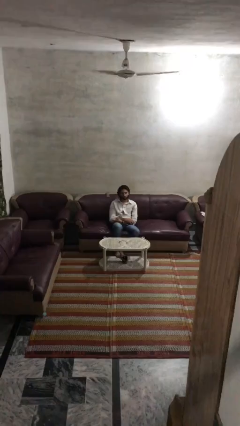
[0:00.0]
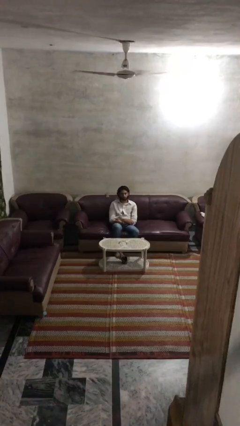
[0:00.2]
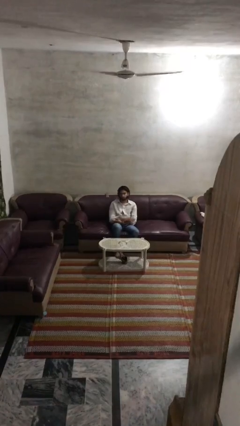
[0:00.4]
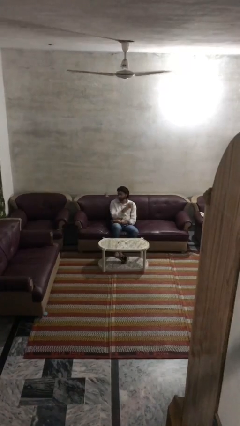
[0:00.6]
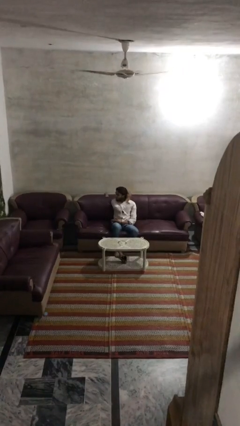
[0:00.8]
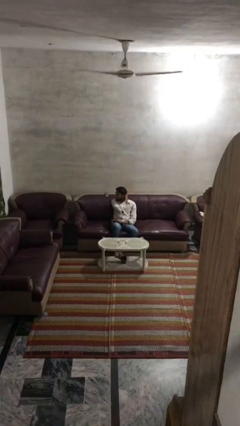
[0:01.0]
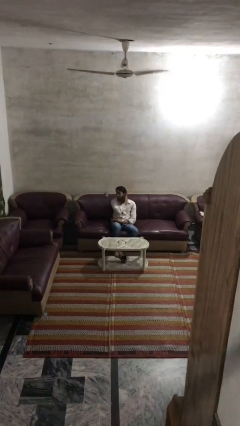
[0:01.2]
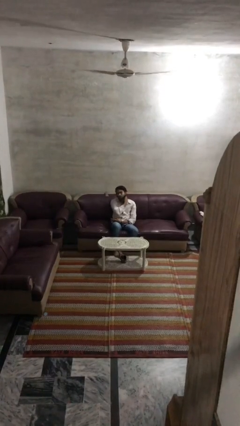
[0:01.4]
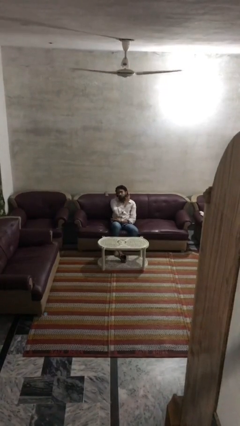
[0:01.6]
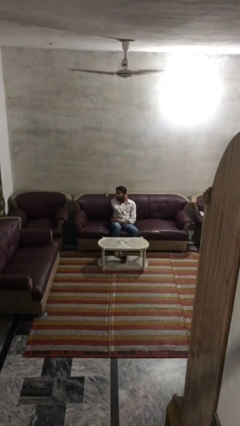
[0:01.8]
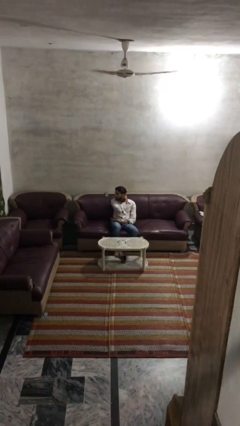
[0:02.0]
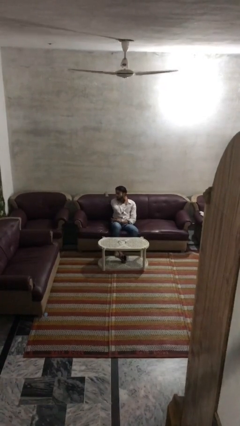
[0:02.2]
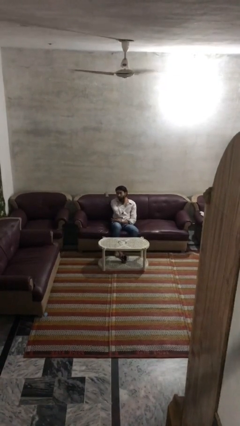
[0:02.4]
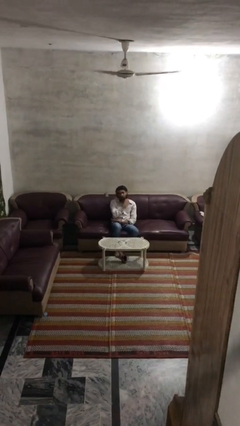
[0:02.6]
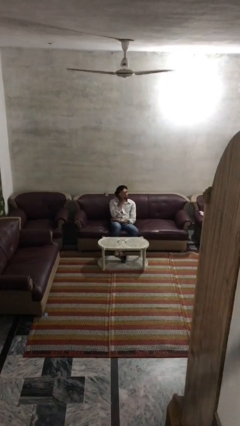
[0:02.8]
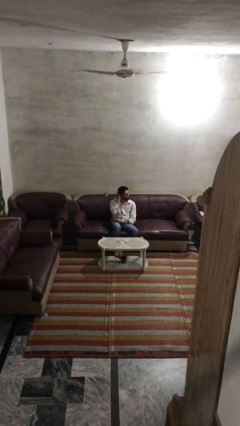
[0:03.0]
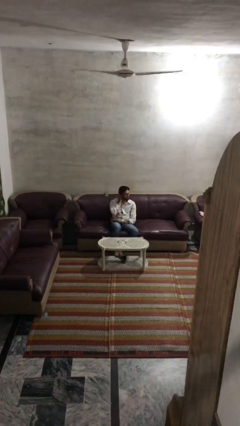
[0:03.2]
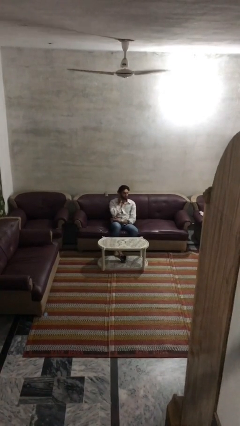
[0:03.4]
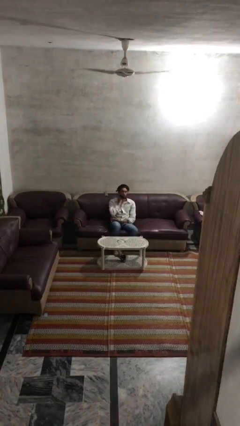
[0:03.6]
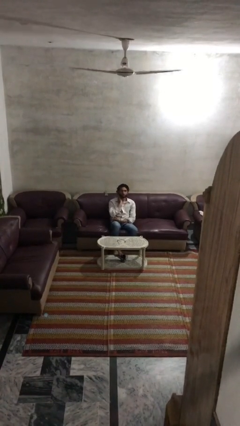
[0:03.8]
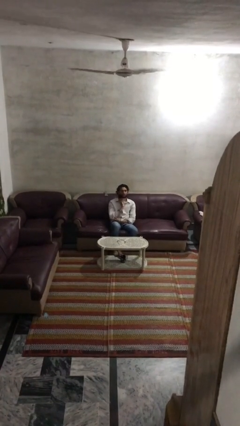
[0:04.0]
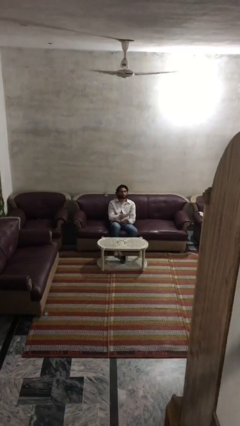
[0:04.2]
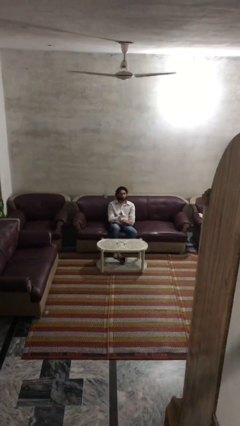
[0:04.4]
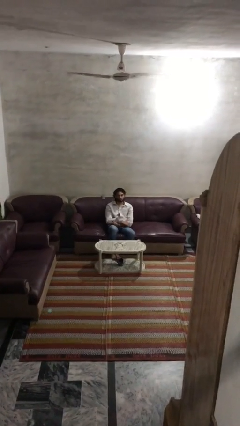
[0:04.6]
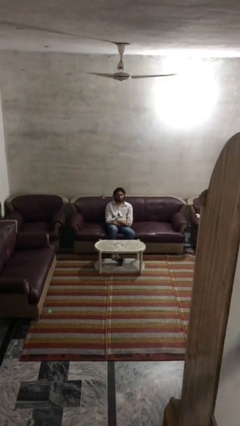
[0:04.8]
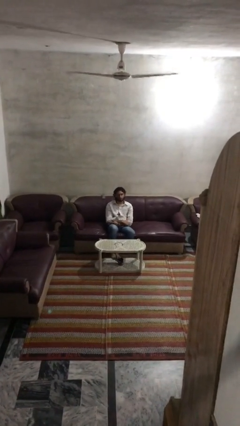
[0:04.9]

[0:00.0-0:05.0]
person strokes hair

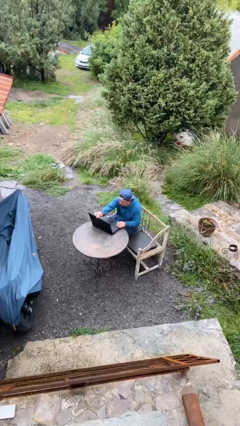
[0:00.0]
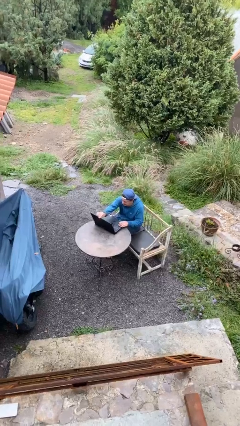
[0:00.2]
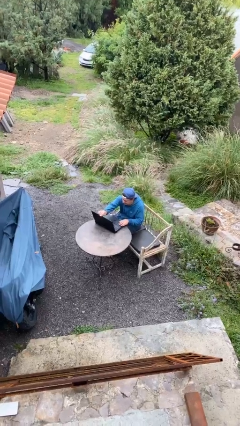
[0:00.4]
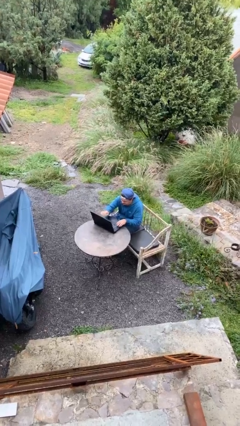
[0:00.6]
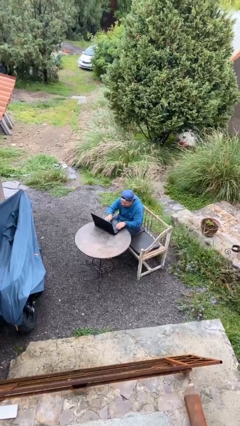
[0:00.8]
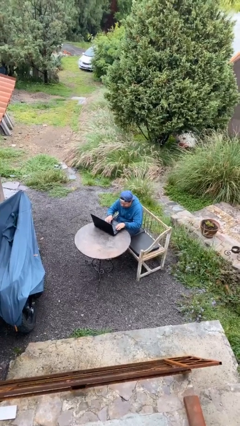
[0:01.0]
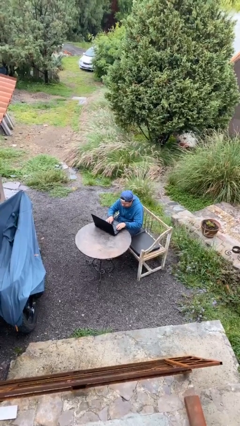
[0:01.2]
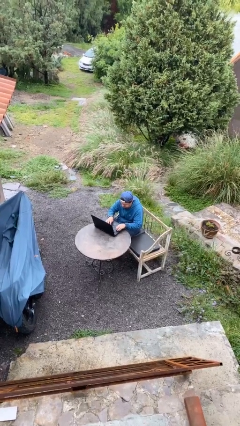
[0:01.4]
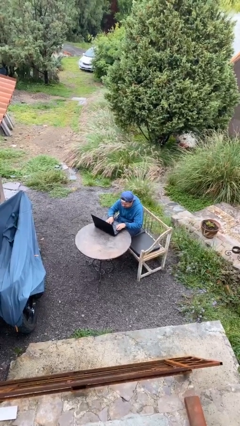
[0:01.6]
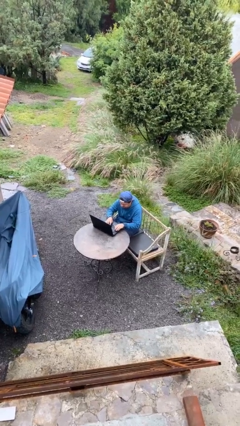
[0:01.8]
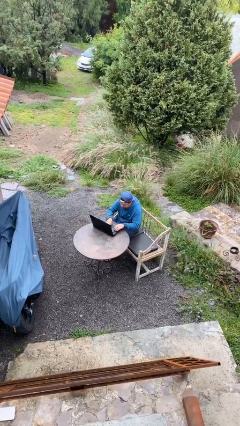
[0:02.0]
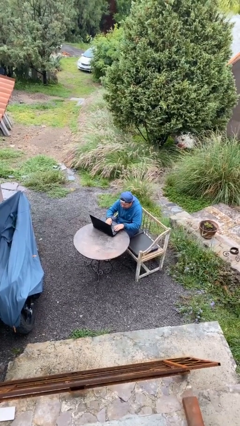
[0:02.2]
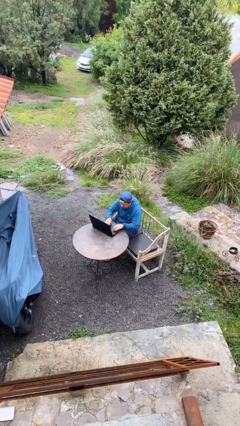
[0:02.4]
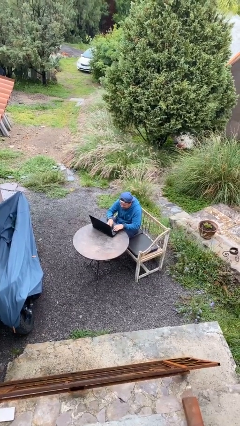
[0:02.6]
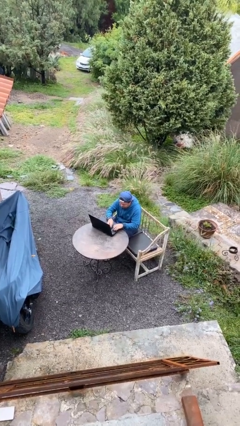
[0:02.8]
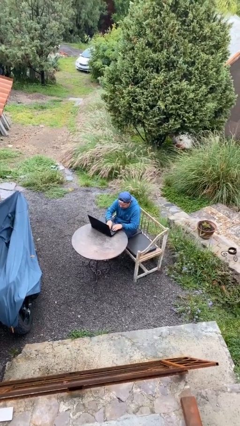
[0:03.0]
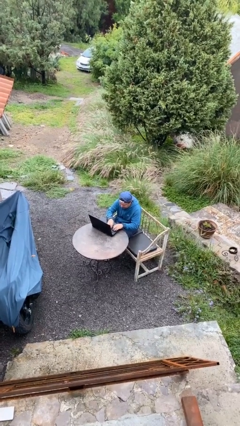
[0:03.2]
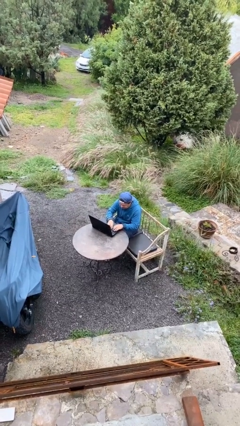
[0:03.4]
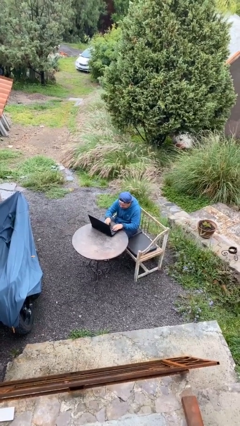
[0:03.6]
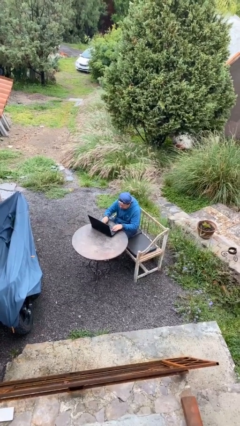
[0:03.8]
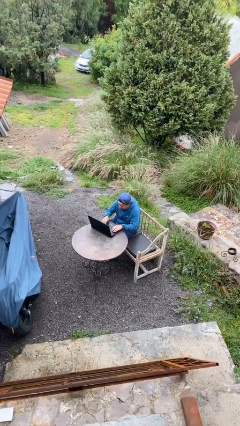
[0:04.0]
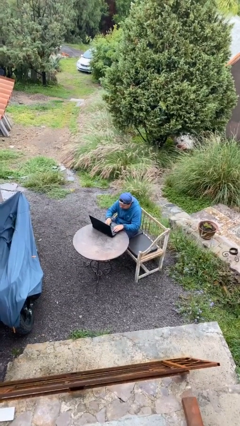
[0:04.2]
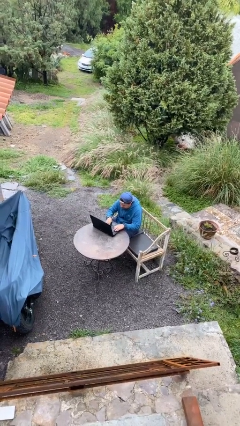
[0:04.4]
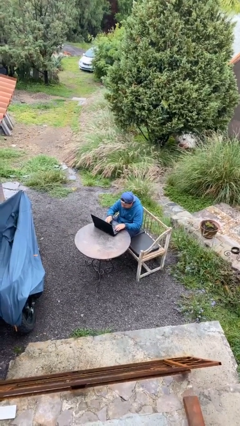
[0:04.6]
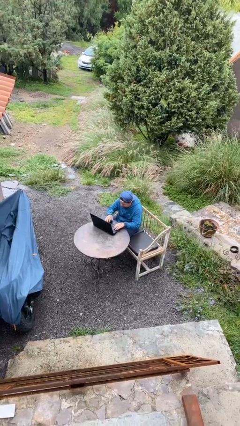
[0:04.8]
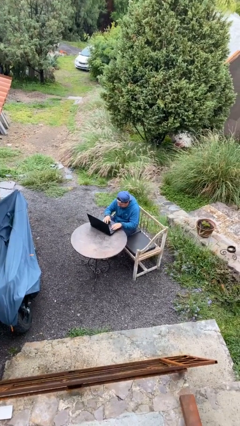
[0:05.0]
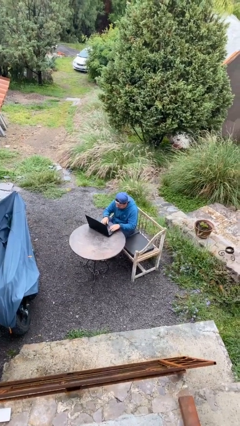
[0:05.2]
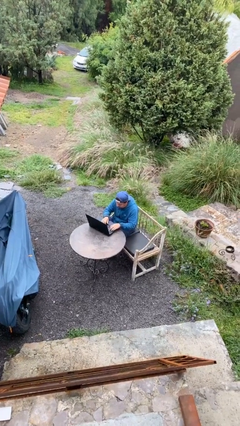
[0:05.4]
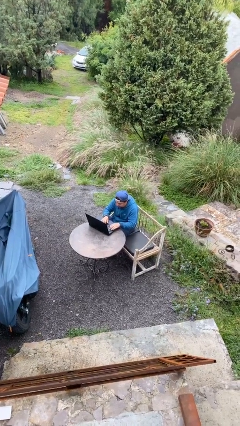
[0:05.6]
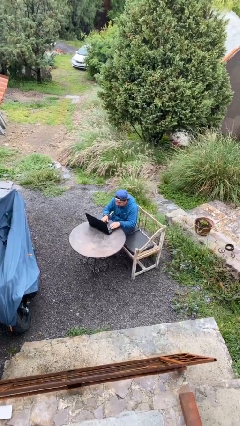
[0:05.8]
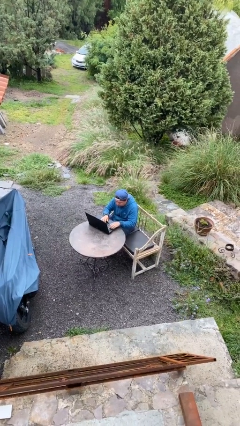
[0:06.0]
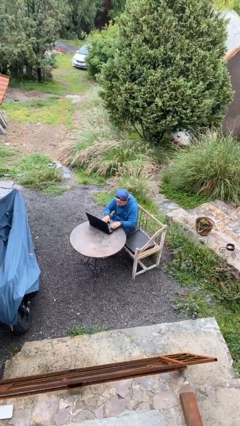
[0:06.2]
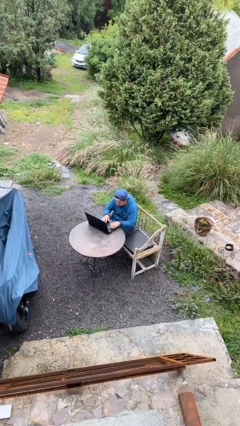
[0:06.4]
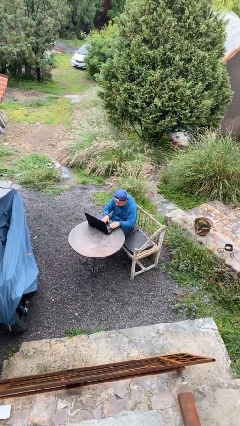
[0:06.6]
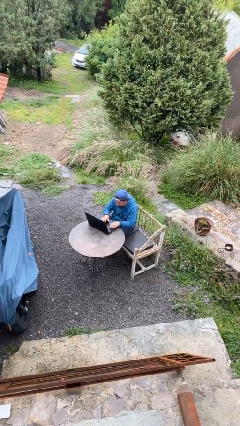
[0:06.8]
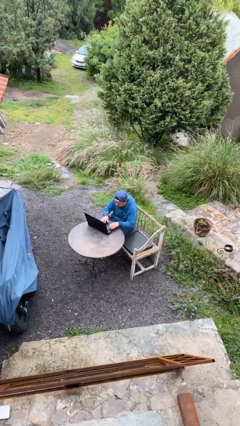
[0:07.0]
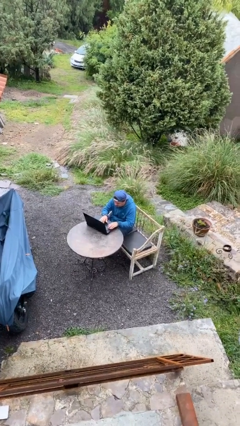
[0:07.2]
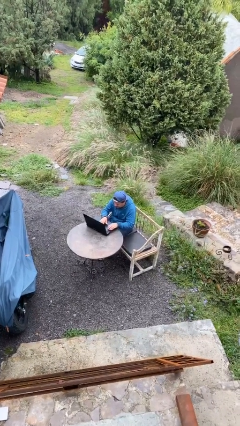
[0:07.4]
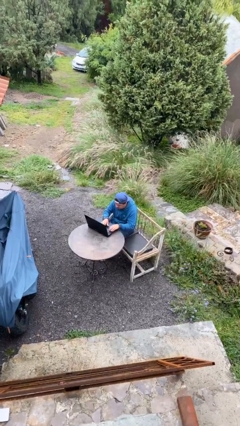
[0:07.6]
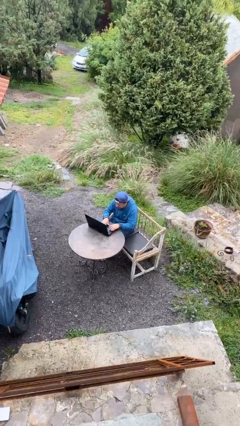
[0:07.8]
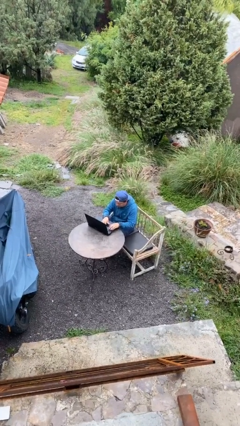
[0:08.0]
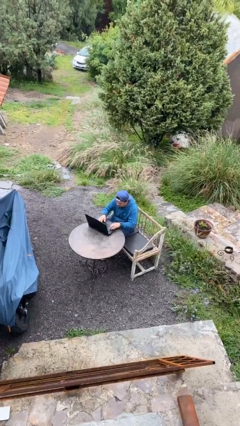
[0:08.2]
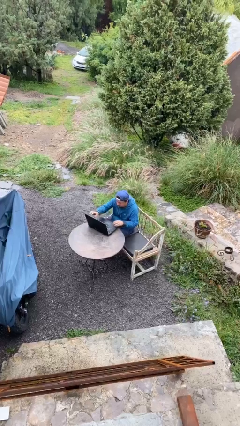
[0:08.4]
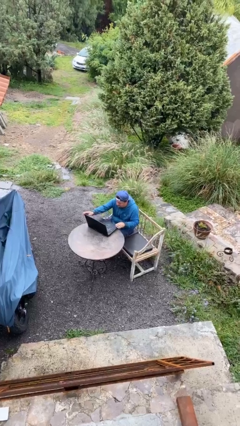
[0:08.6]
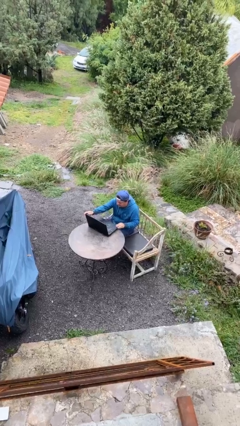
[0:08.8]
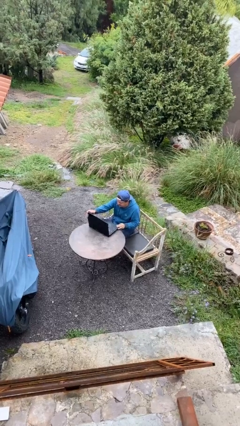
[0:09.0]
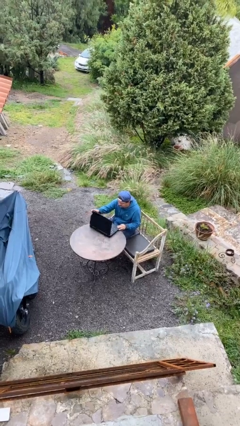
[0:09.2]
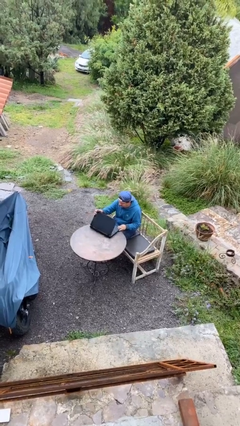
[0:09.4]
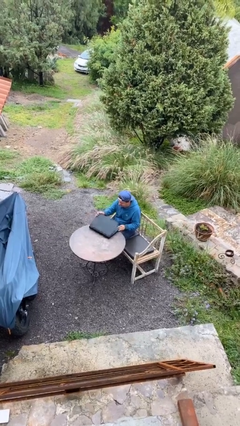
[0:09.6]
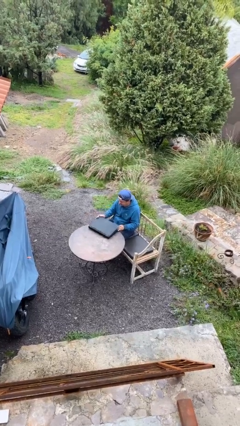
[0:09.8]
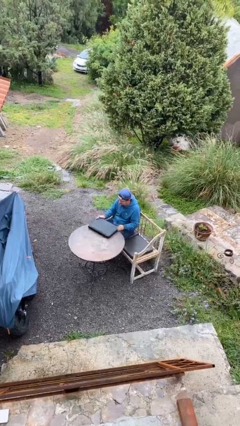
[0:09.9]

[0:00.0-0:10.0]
person interacts with laptop

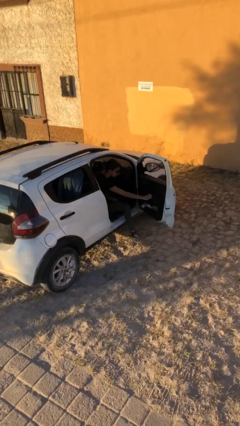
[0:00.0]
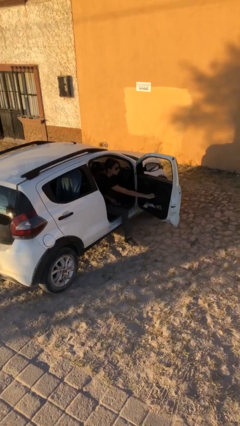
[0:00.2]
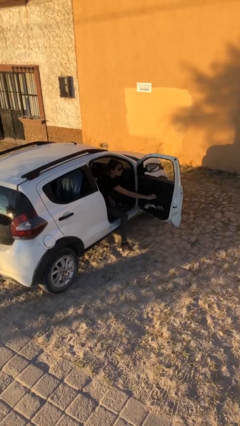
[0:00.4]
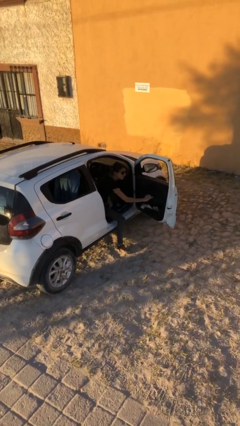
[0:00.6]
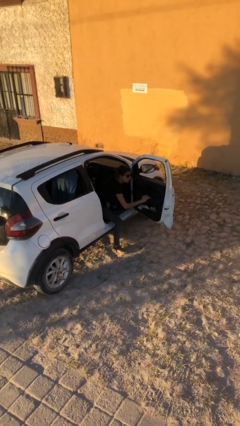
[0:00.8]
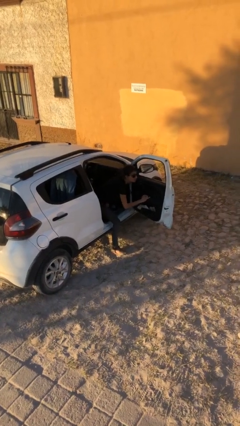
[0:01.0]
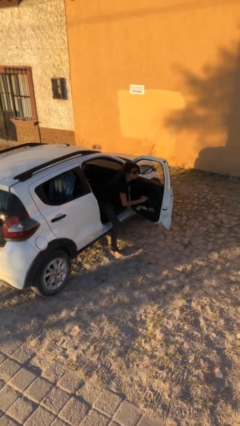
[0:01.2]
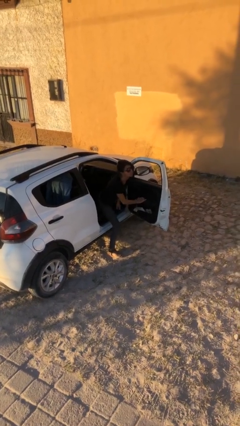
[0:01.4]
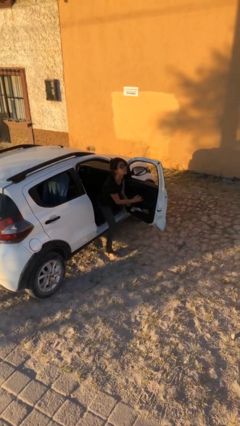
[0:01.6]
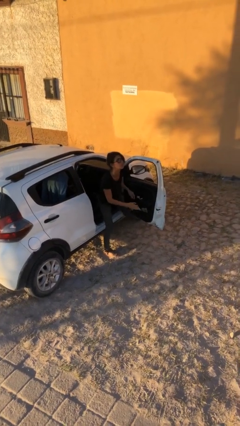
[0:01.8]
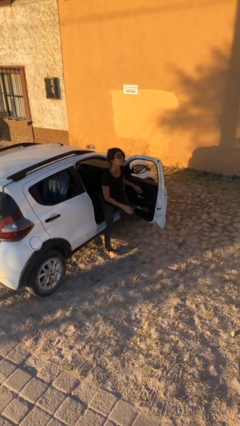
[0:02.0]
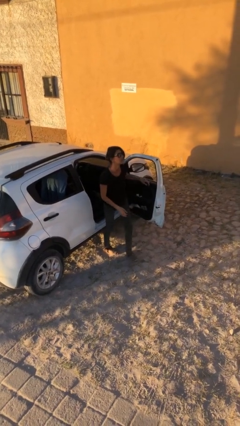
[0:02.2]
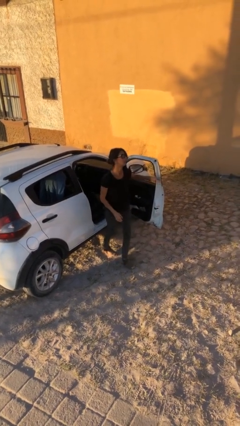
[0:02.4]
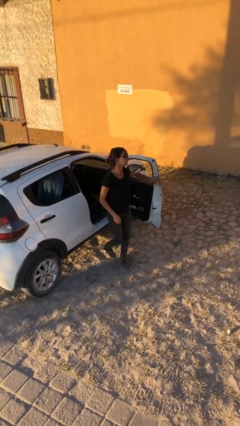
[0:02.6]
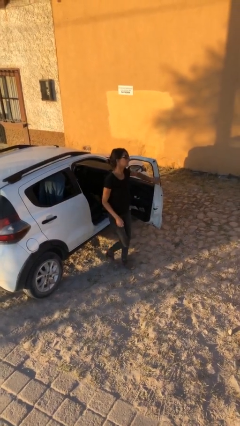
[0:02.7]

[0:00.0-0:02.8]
person exits car

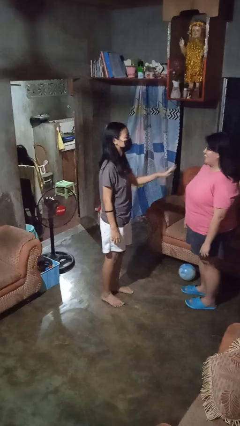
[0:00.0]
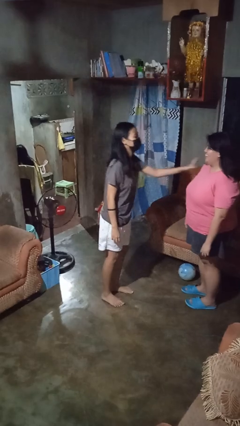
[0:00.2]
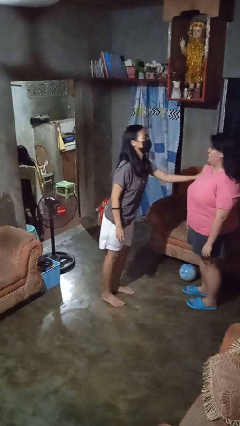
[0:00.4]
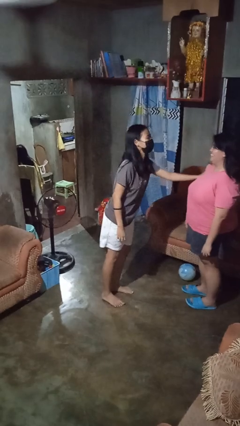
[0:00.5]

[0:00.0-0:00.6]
person shoves person
